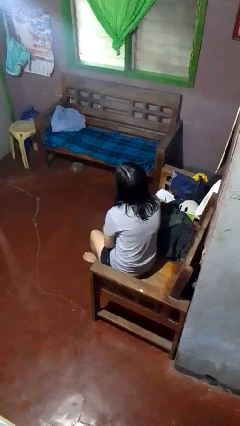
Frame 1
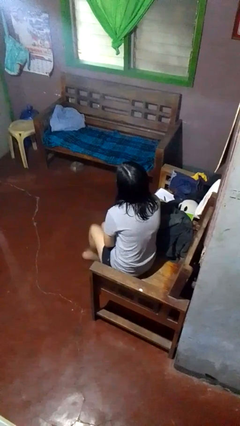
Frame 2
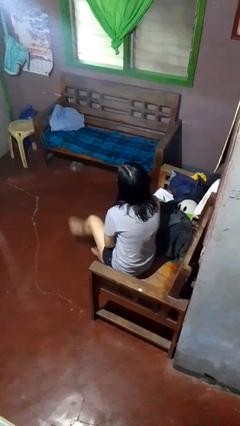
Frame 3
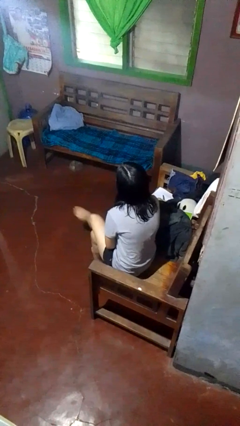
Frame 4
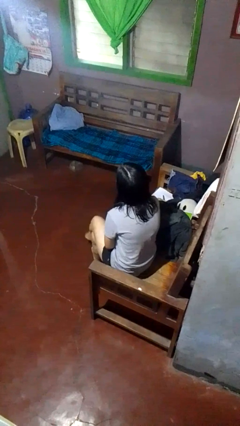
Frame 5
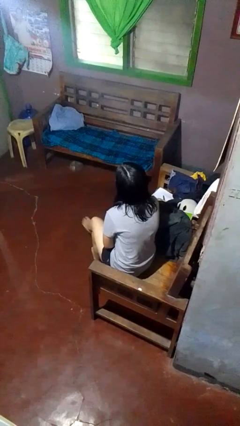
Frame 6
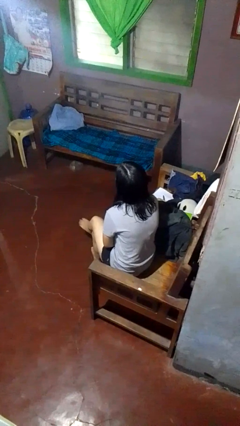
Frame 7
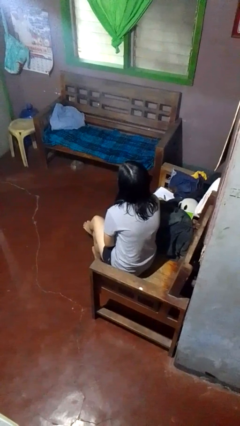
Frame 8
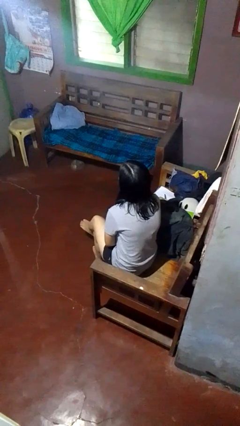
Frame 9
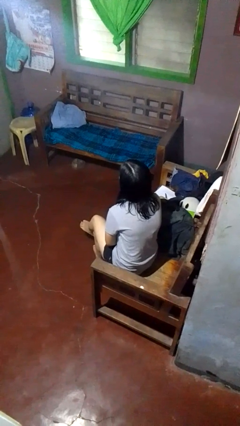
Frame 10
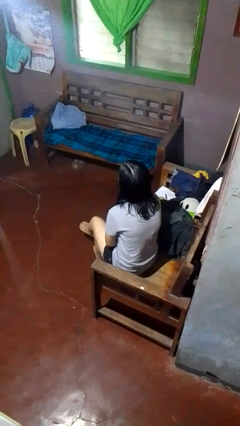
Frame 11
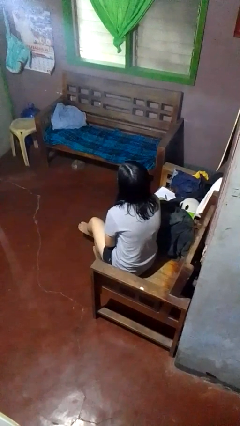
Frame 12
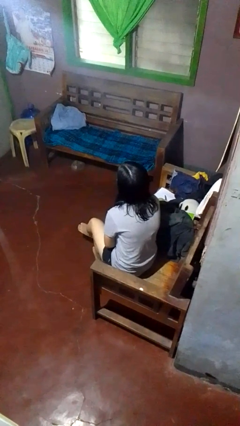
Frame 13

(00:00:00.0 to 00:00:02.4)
person crosses legs

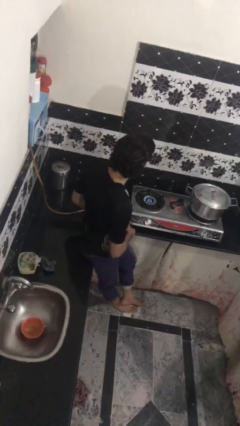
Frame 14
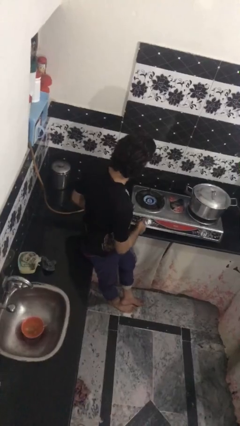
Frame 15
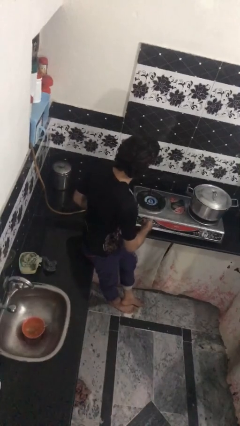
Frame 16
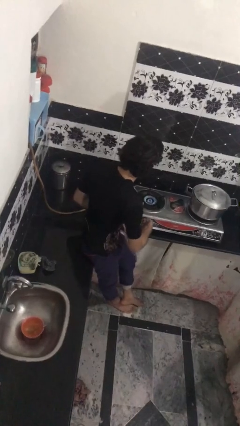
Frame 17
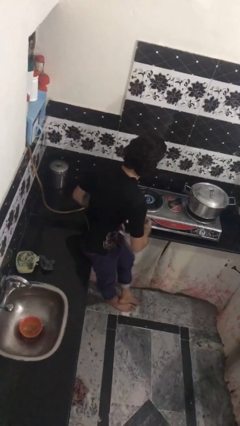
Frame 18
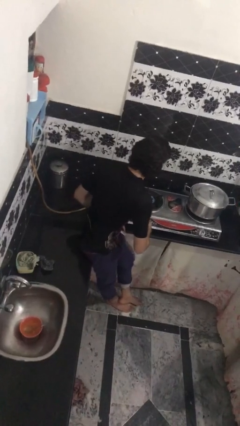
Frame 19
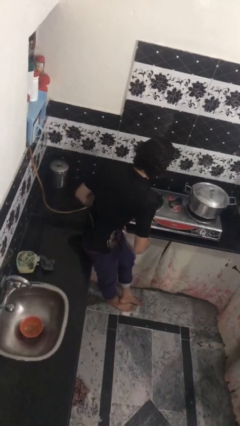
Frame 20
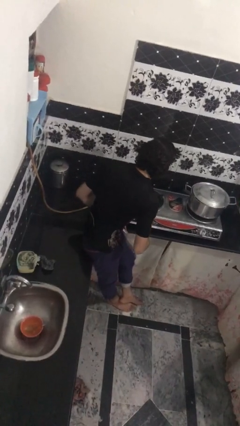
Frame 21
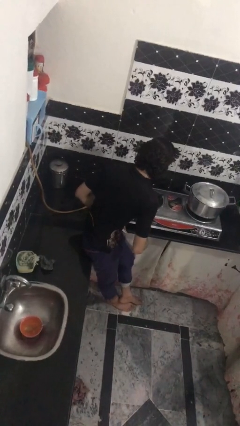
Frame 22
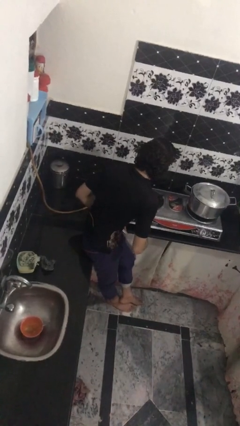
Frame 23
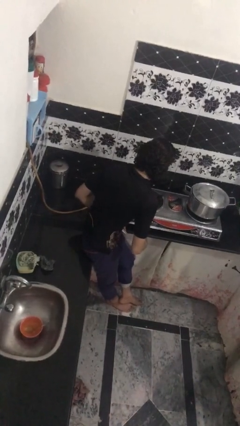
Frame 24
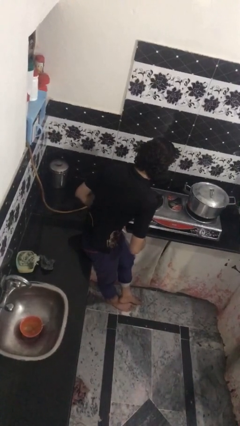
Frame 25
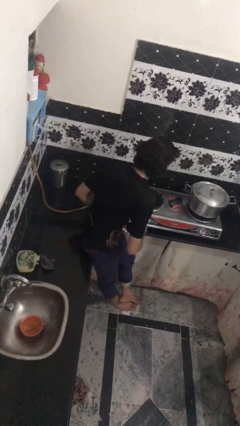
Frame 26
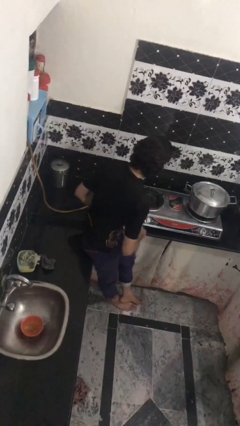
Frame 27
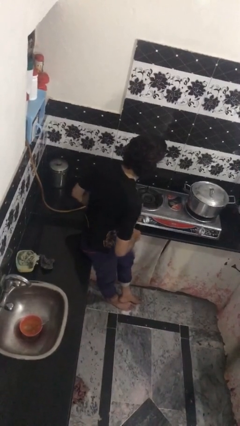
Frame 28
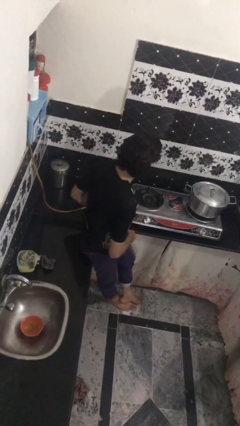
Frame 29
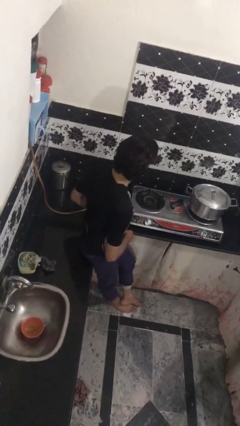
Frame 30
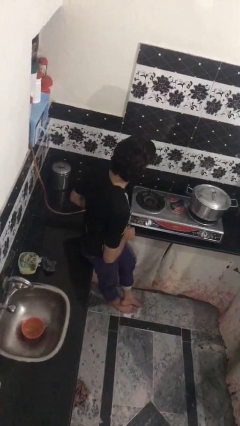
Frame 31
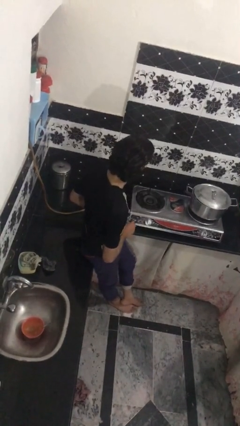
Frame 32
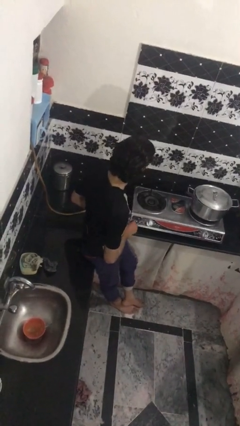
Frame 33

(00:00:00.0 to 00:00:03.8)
person turns off stovetop

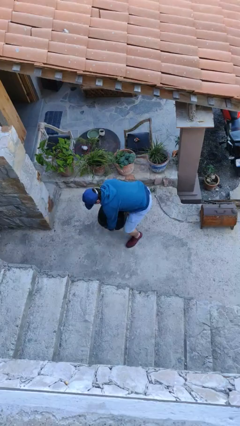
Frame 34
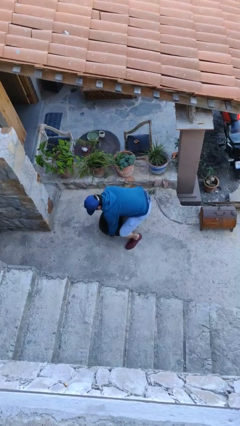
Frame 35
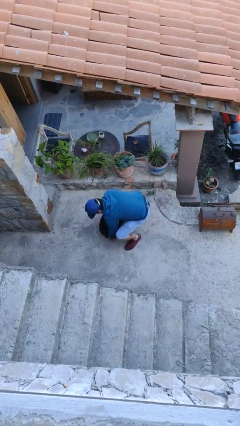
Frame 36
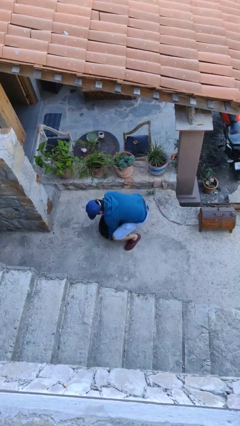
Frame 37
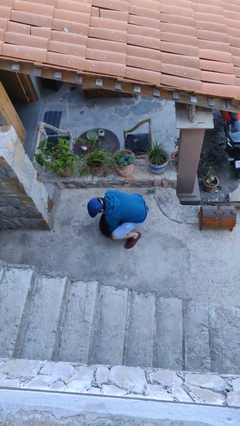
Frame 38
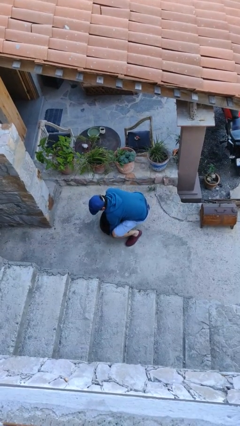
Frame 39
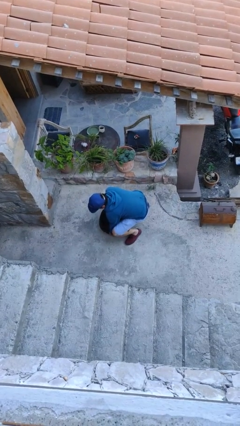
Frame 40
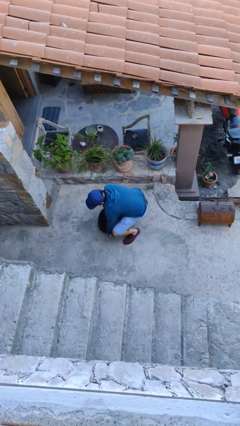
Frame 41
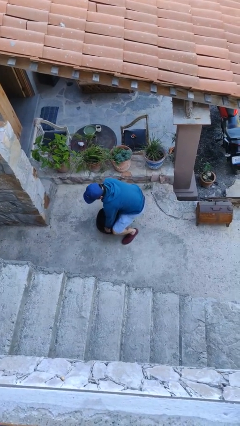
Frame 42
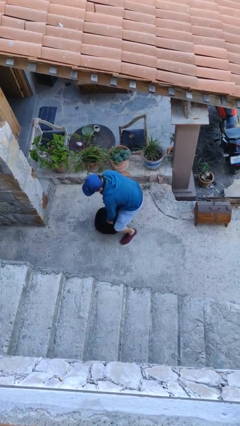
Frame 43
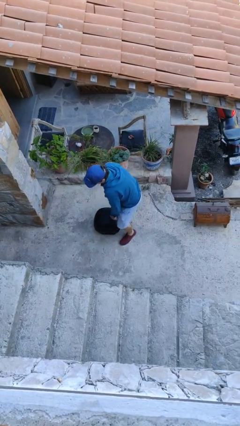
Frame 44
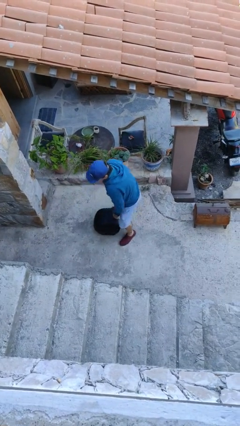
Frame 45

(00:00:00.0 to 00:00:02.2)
person puts down object on floor

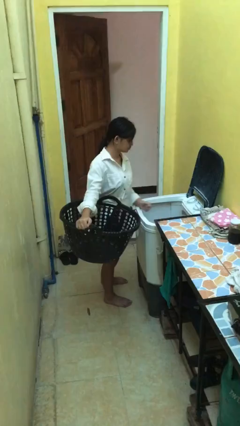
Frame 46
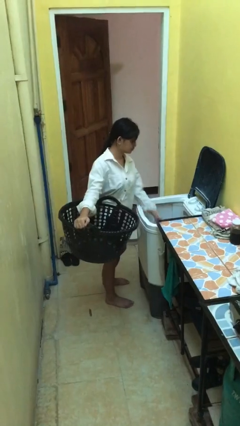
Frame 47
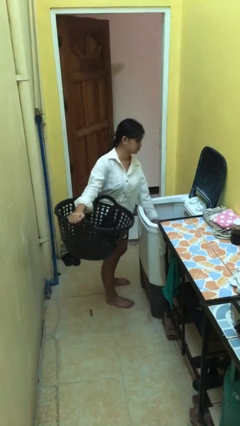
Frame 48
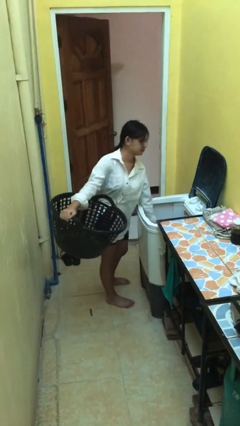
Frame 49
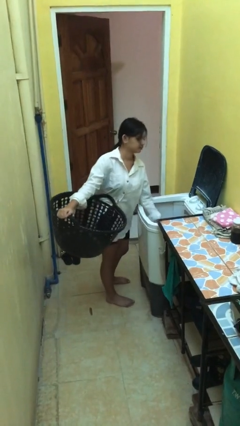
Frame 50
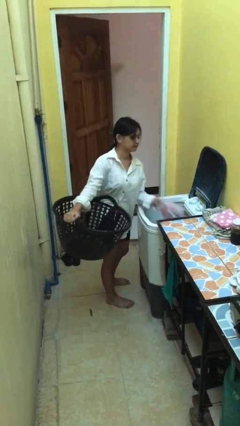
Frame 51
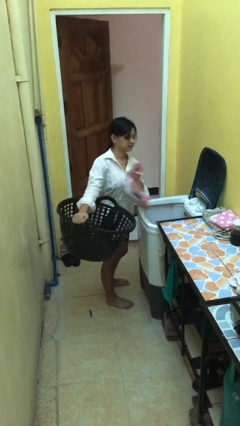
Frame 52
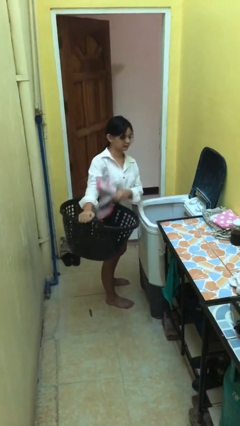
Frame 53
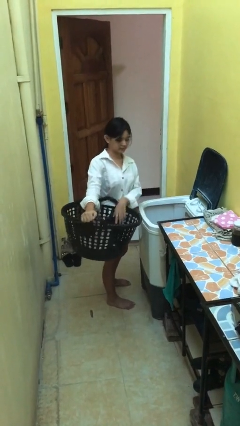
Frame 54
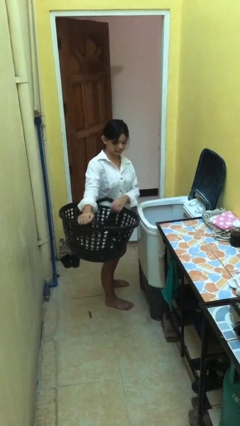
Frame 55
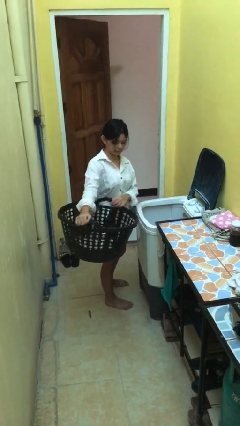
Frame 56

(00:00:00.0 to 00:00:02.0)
person loads clotheswasher

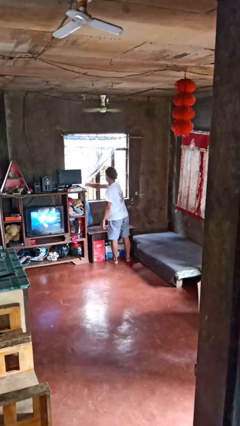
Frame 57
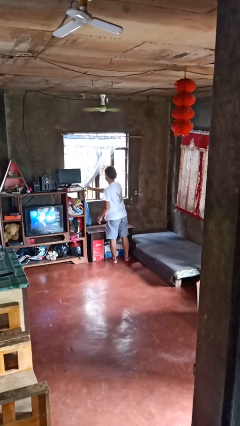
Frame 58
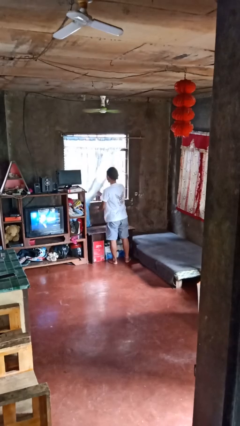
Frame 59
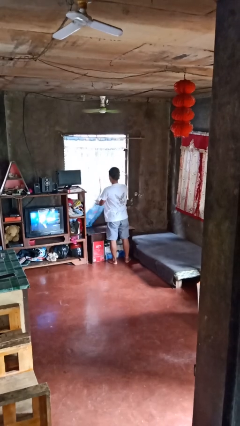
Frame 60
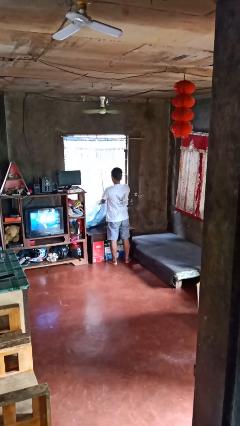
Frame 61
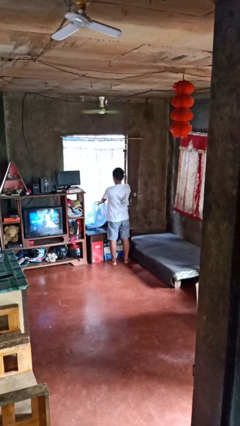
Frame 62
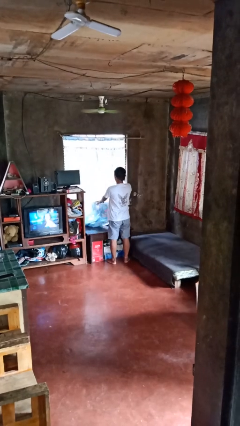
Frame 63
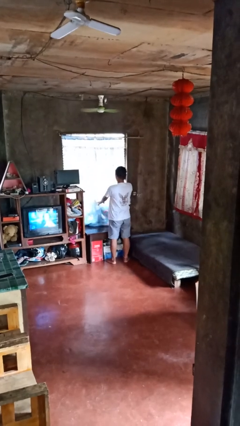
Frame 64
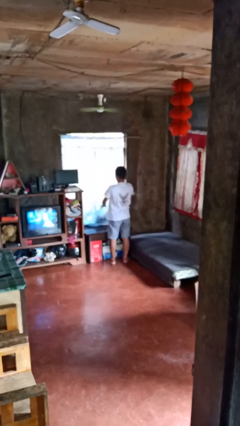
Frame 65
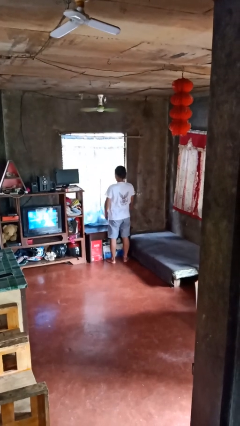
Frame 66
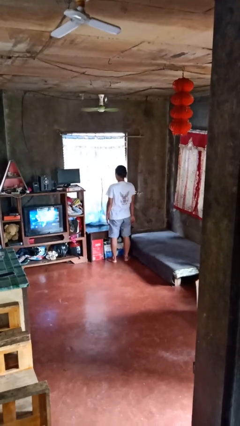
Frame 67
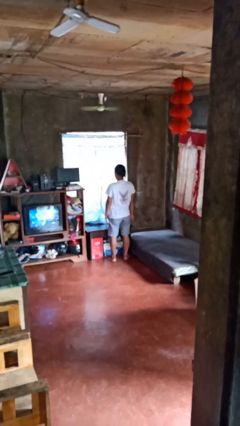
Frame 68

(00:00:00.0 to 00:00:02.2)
person closes curtains

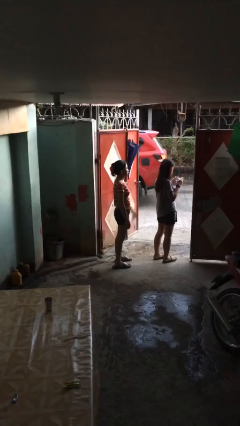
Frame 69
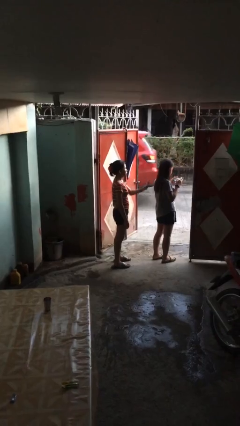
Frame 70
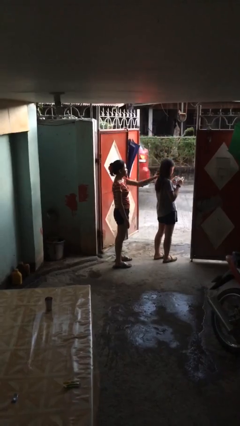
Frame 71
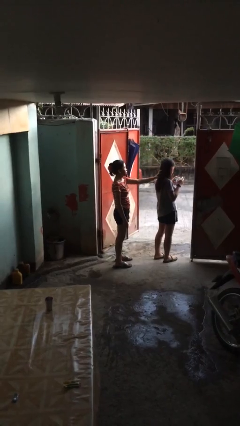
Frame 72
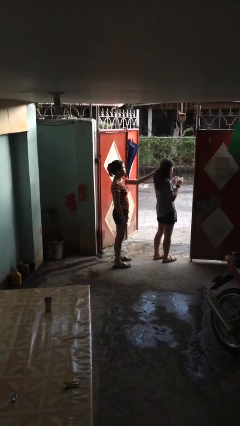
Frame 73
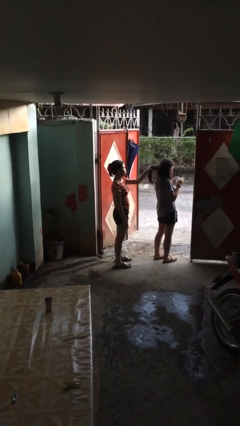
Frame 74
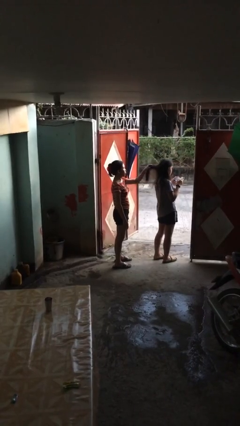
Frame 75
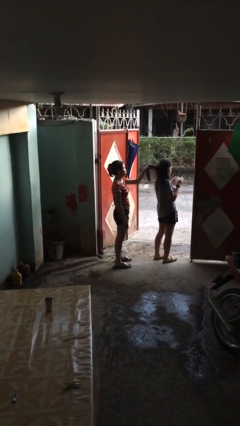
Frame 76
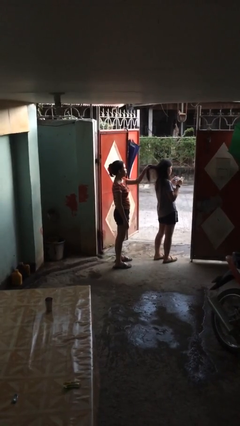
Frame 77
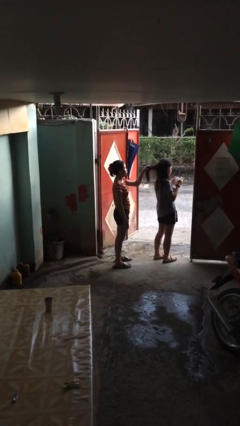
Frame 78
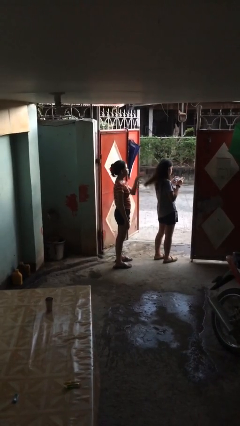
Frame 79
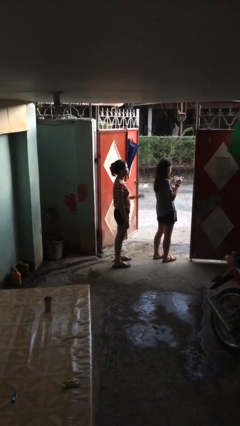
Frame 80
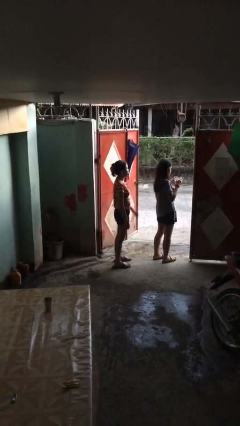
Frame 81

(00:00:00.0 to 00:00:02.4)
person grabs person by hair

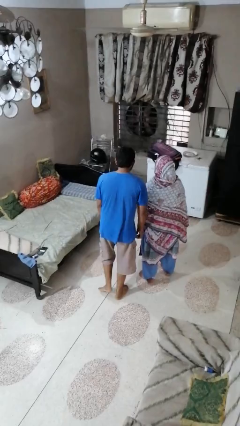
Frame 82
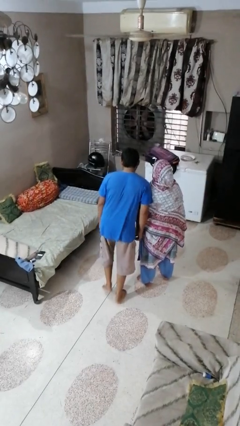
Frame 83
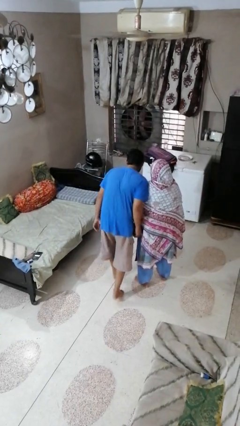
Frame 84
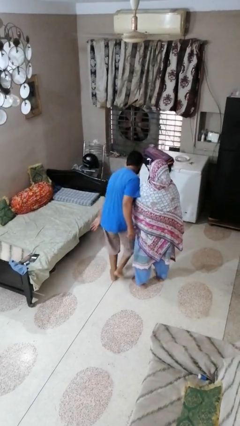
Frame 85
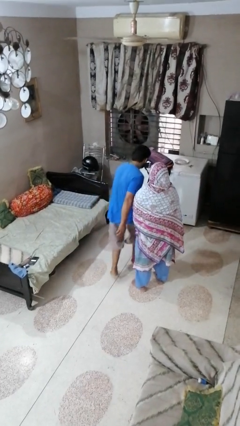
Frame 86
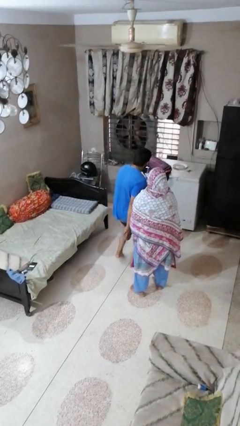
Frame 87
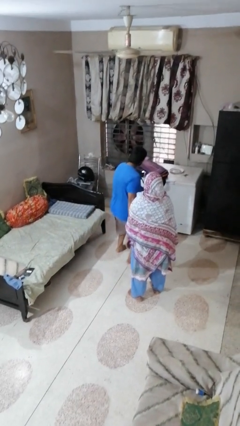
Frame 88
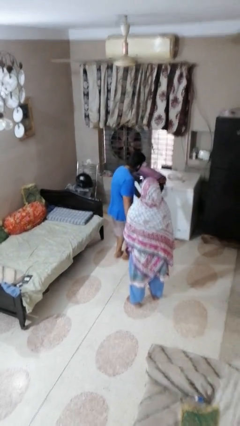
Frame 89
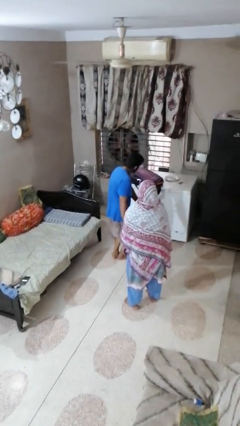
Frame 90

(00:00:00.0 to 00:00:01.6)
person bumps into person

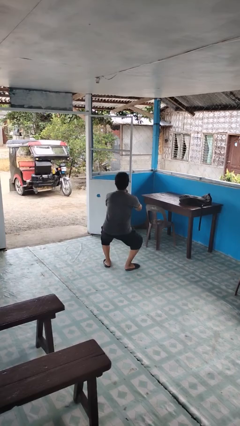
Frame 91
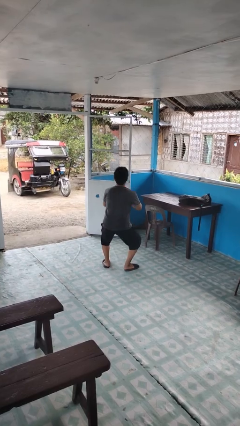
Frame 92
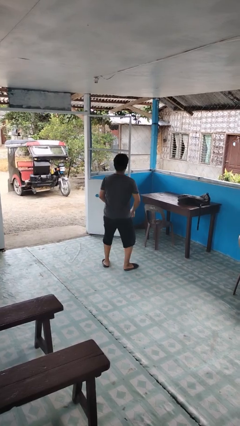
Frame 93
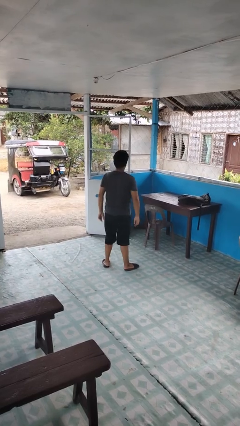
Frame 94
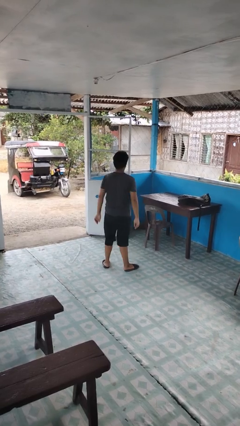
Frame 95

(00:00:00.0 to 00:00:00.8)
person stands up
